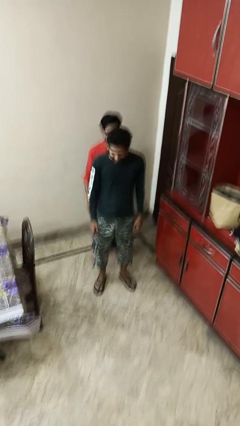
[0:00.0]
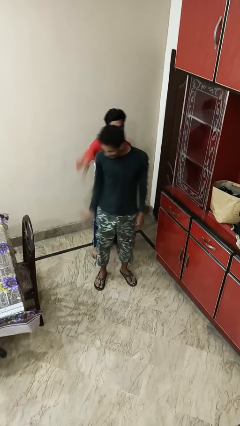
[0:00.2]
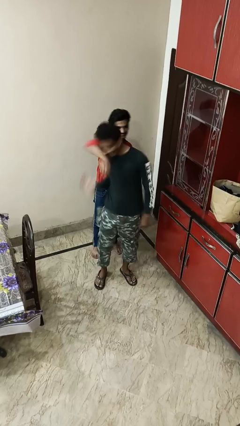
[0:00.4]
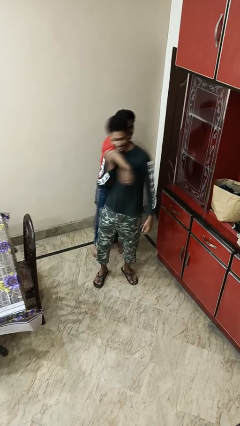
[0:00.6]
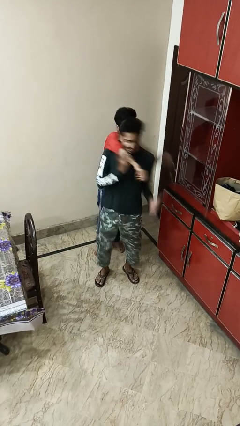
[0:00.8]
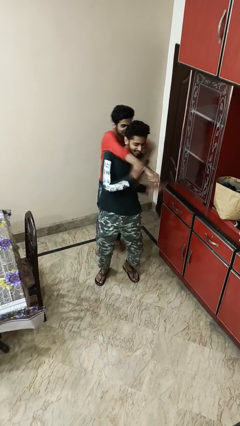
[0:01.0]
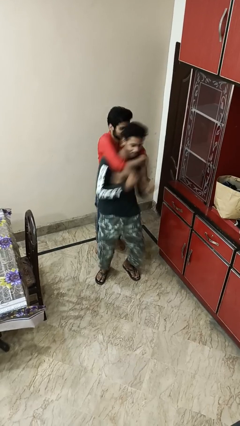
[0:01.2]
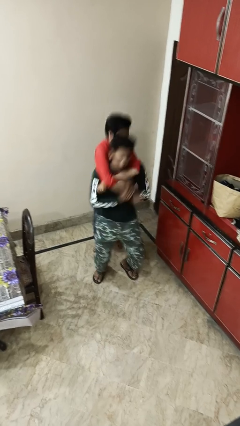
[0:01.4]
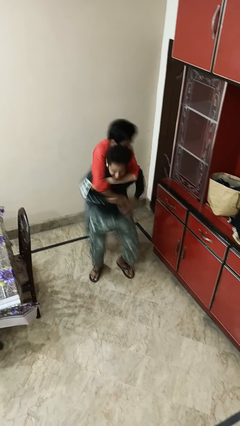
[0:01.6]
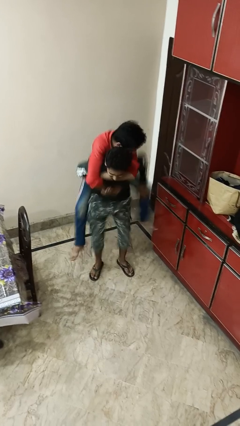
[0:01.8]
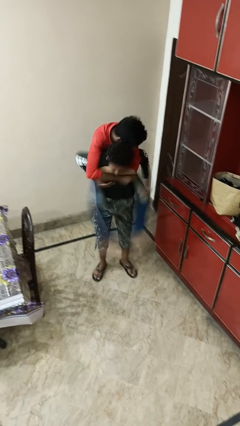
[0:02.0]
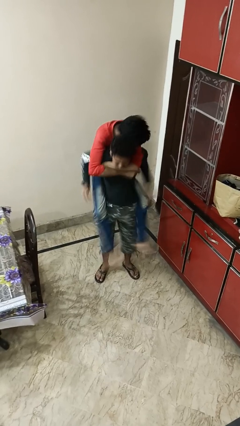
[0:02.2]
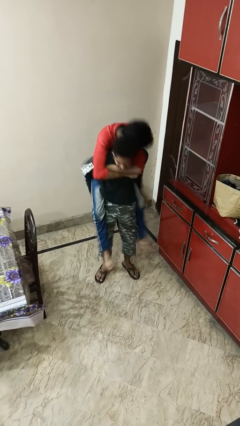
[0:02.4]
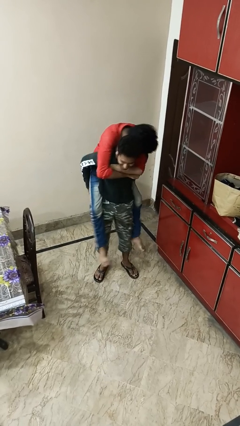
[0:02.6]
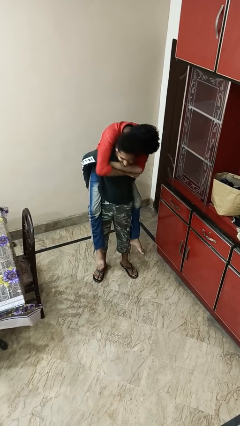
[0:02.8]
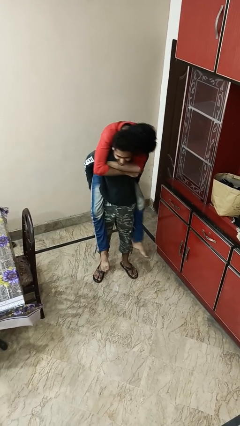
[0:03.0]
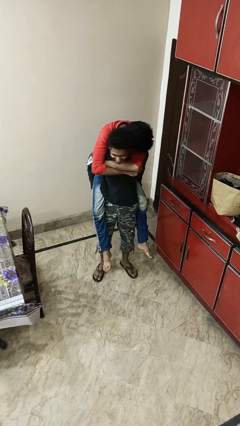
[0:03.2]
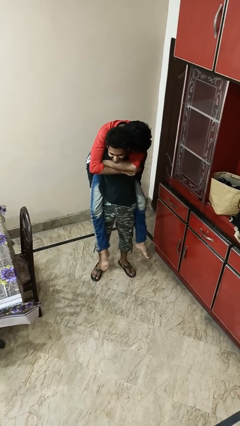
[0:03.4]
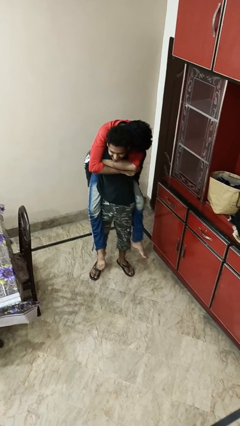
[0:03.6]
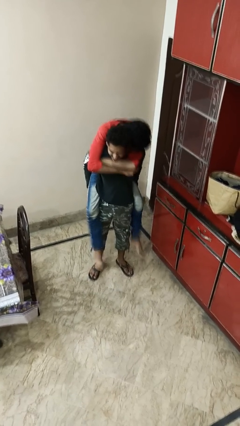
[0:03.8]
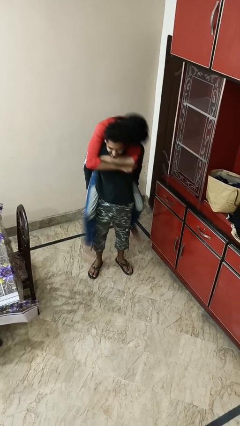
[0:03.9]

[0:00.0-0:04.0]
person carries person over shoulder

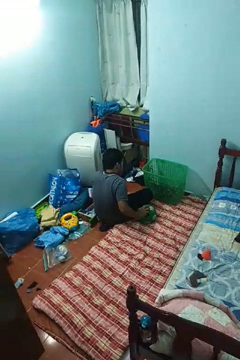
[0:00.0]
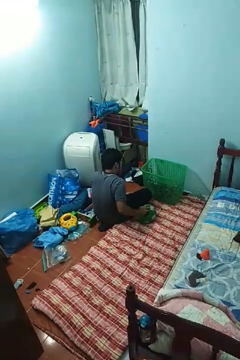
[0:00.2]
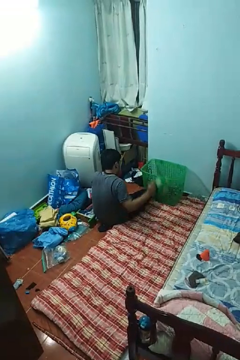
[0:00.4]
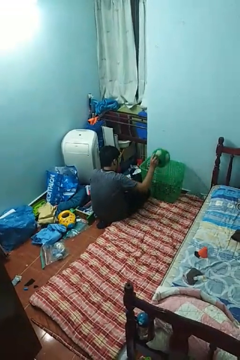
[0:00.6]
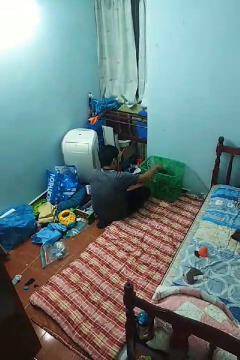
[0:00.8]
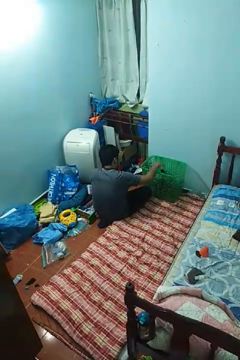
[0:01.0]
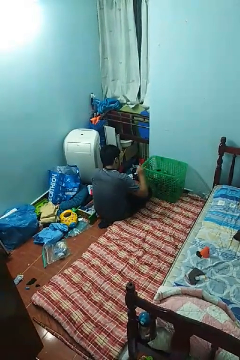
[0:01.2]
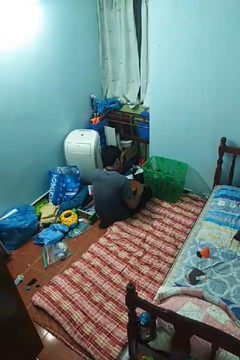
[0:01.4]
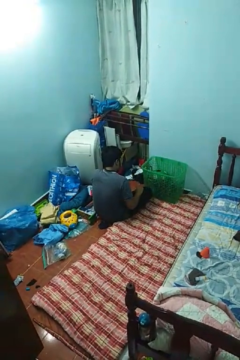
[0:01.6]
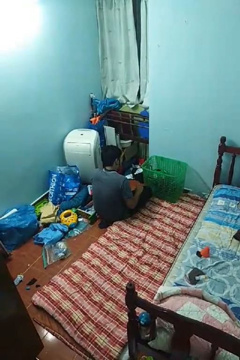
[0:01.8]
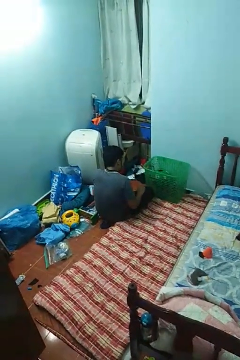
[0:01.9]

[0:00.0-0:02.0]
person puts object into basket

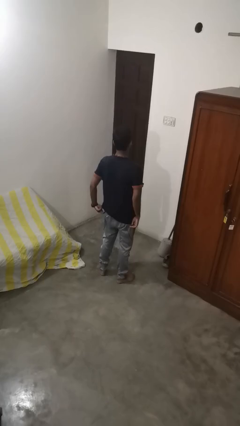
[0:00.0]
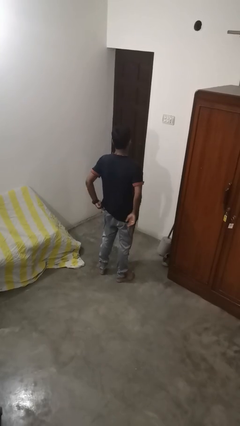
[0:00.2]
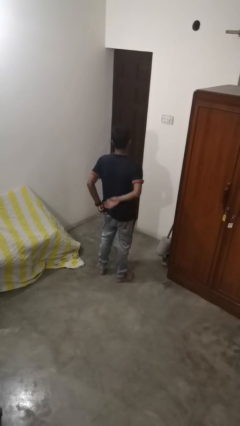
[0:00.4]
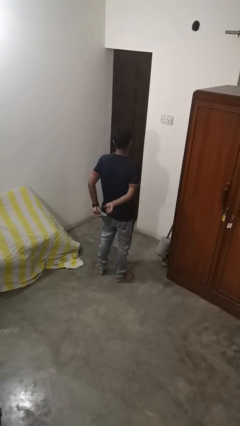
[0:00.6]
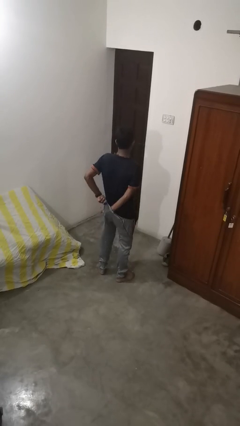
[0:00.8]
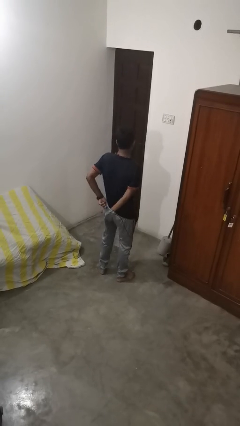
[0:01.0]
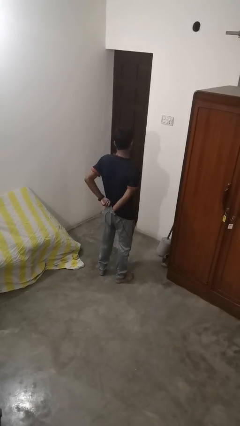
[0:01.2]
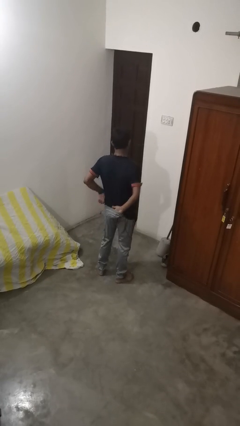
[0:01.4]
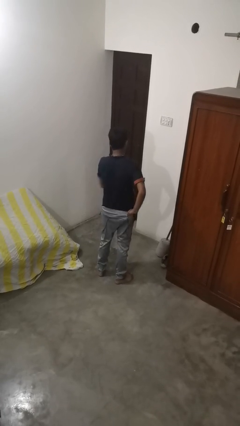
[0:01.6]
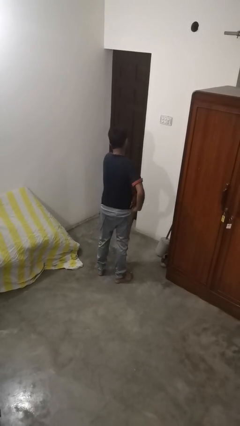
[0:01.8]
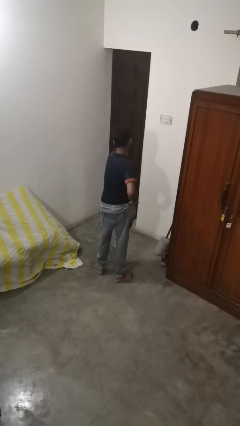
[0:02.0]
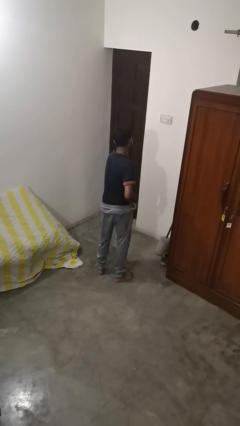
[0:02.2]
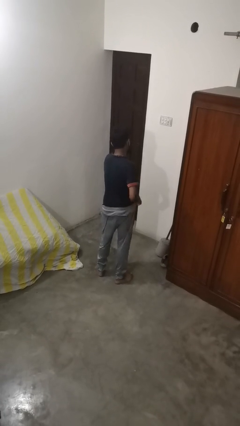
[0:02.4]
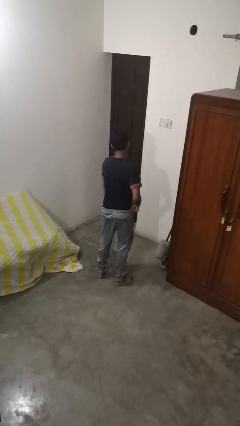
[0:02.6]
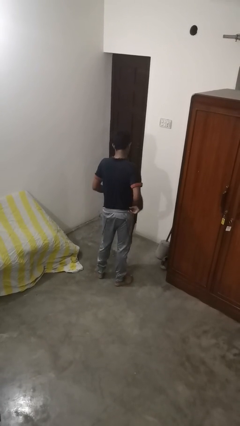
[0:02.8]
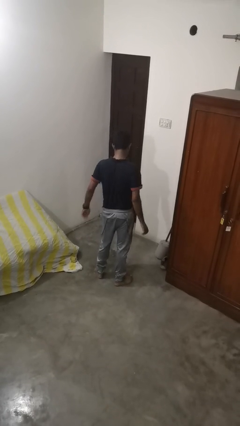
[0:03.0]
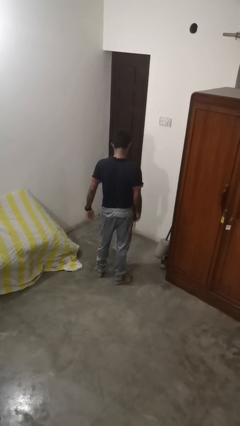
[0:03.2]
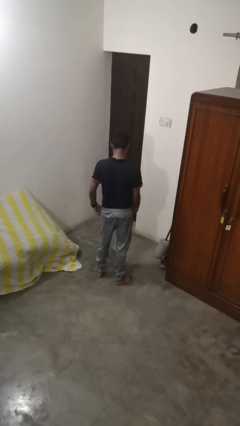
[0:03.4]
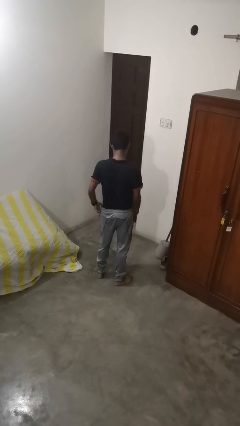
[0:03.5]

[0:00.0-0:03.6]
person tucks in shirt

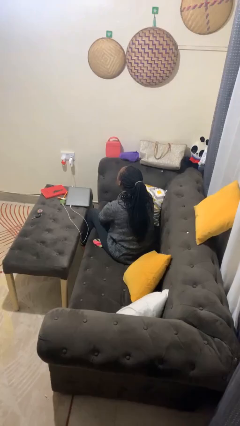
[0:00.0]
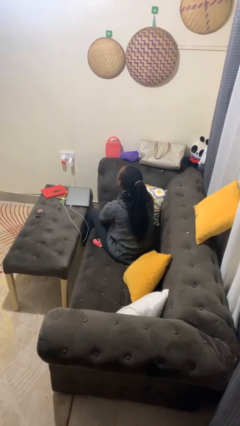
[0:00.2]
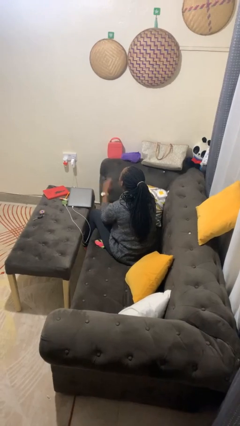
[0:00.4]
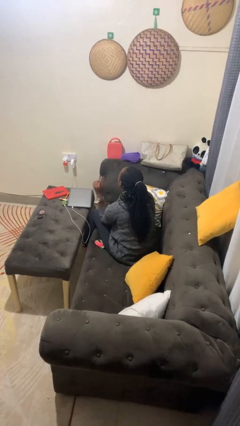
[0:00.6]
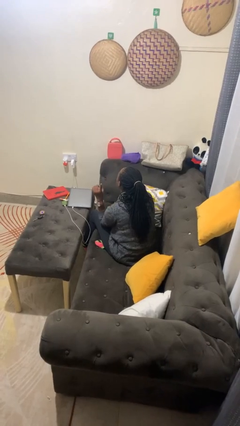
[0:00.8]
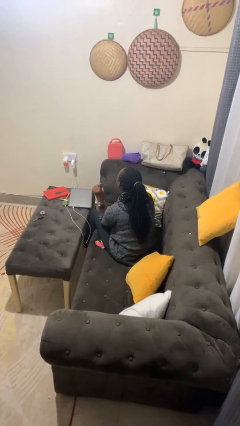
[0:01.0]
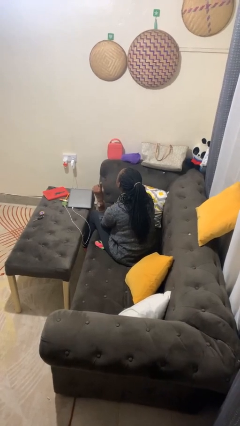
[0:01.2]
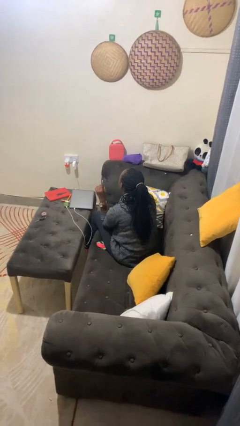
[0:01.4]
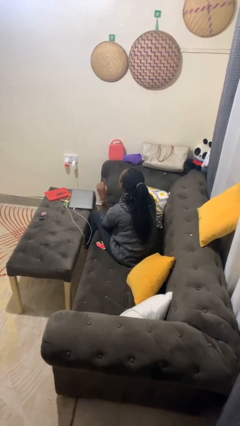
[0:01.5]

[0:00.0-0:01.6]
person gestures number one

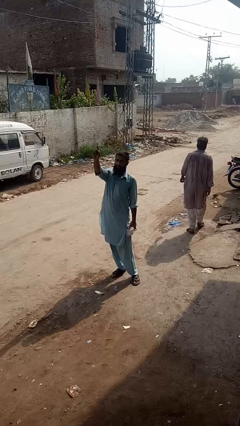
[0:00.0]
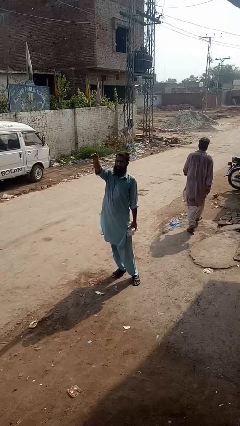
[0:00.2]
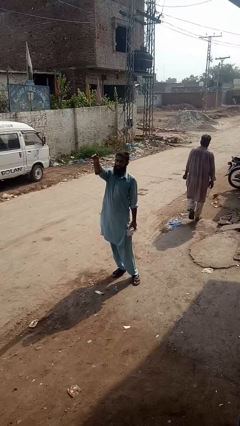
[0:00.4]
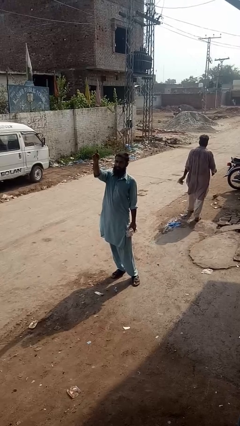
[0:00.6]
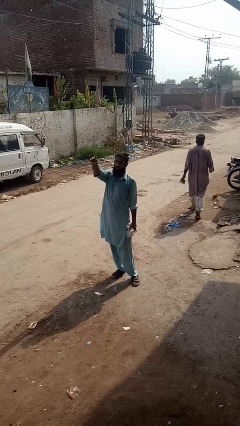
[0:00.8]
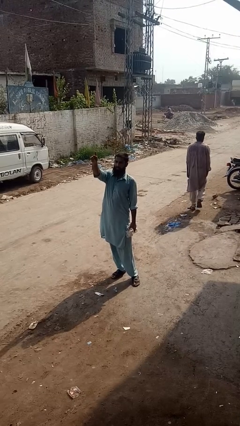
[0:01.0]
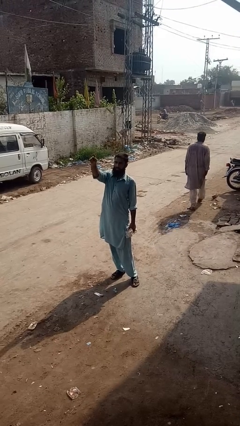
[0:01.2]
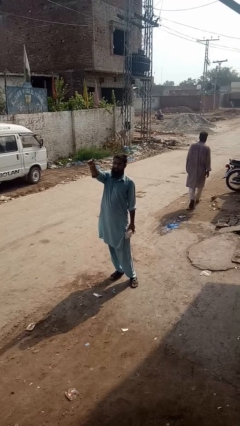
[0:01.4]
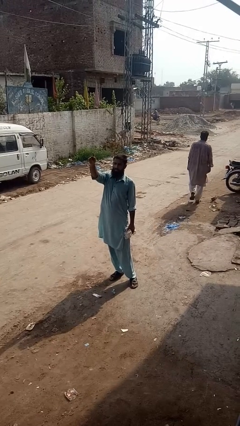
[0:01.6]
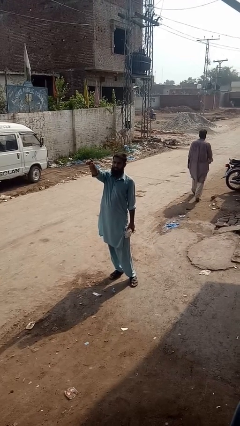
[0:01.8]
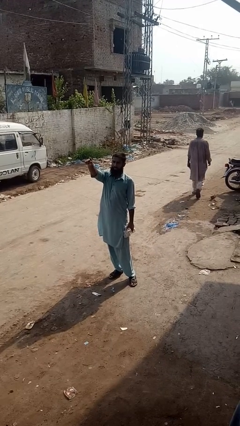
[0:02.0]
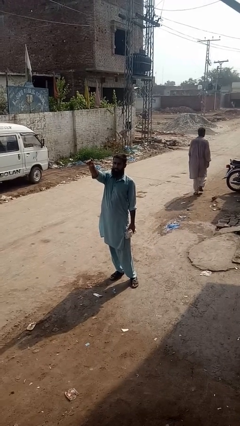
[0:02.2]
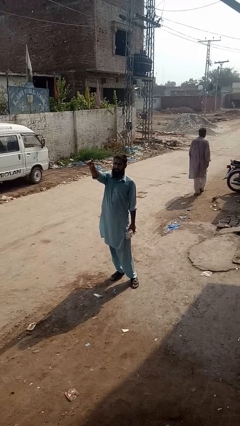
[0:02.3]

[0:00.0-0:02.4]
person points at person

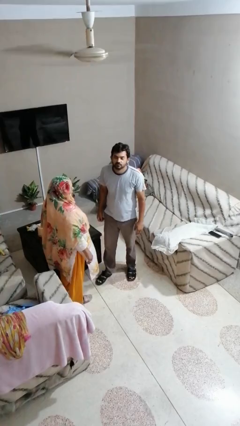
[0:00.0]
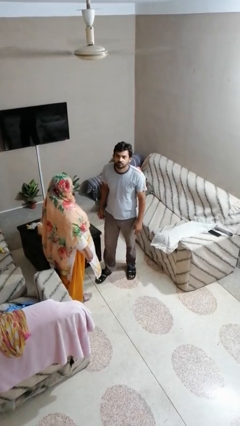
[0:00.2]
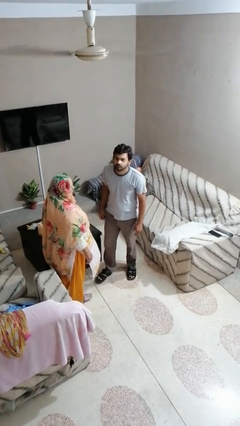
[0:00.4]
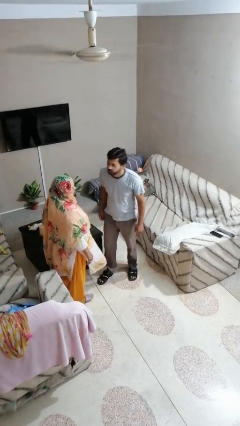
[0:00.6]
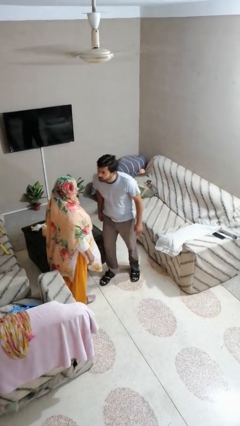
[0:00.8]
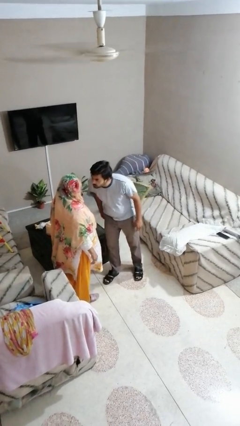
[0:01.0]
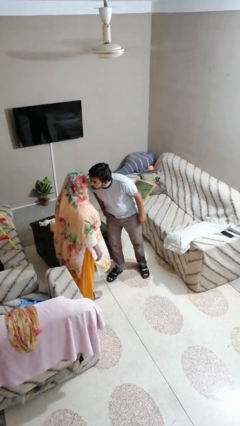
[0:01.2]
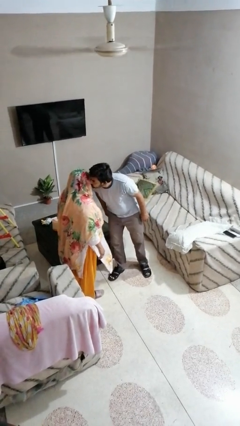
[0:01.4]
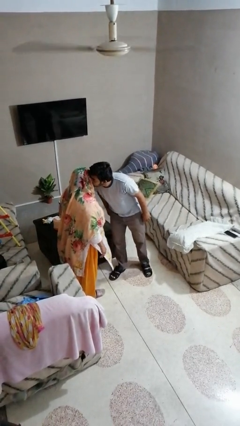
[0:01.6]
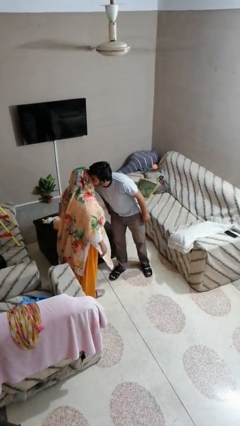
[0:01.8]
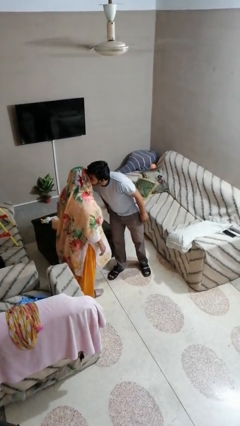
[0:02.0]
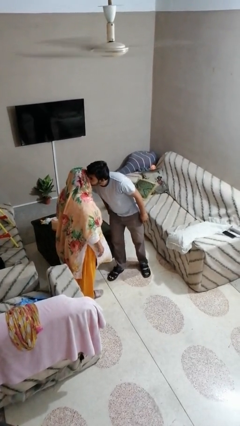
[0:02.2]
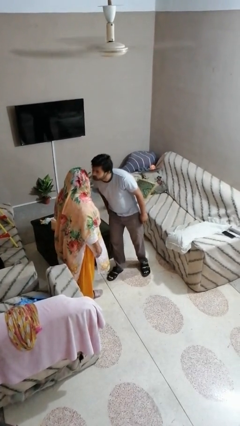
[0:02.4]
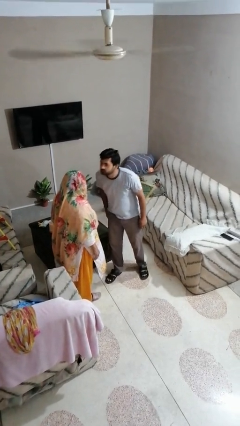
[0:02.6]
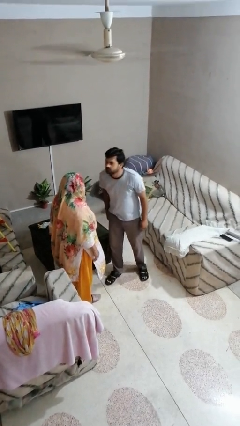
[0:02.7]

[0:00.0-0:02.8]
person kisses cheek of person

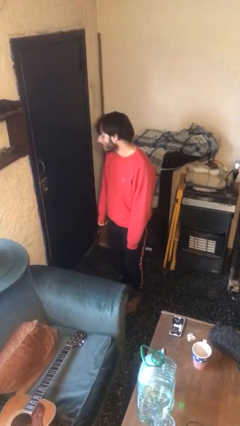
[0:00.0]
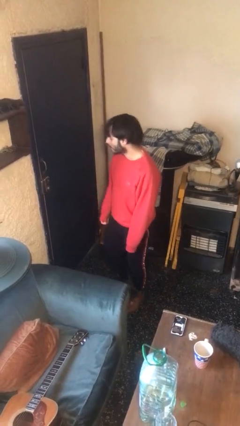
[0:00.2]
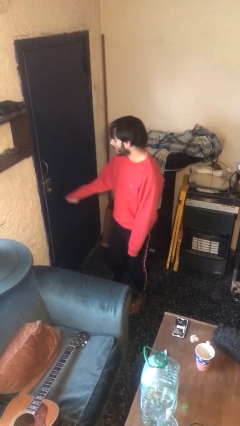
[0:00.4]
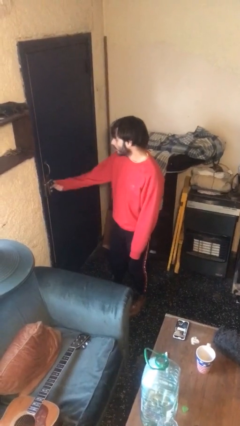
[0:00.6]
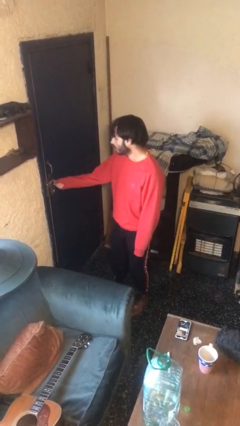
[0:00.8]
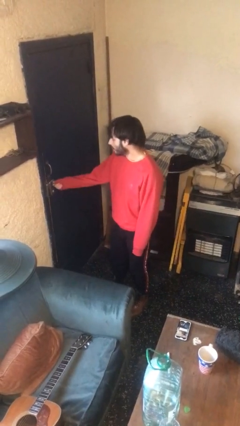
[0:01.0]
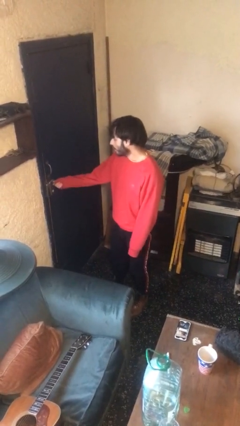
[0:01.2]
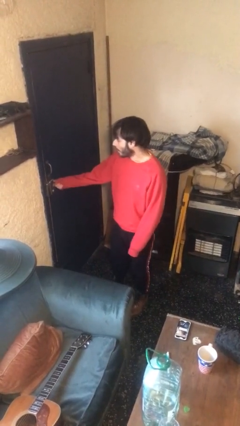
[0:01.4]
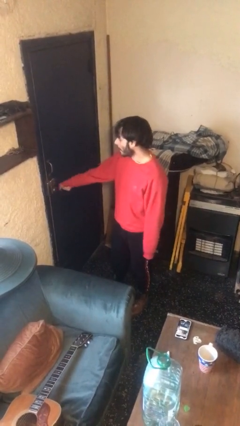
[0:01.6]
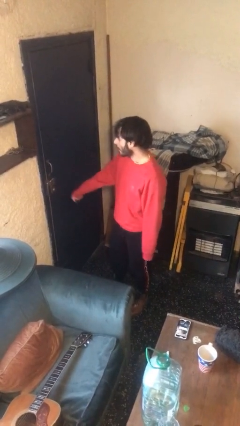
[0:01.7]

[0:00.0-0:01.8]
person unlocks door with keys
